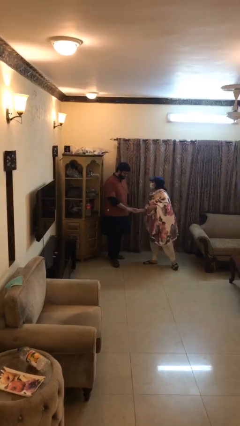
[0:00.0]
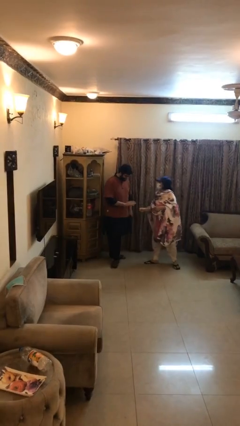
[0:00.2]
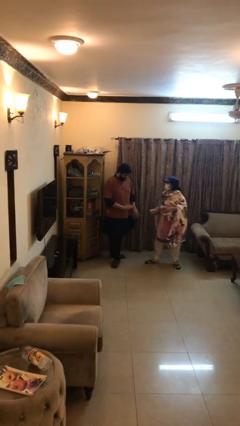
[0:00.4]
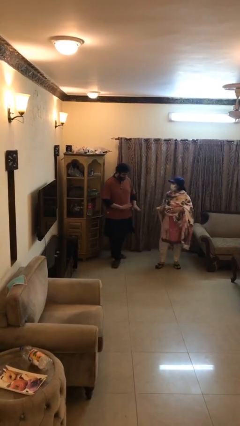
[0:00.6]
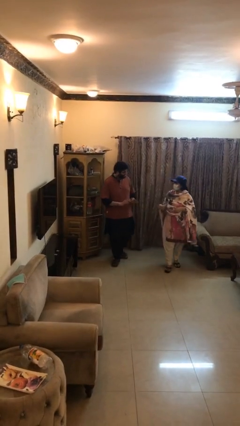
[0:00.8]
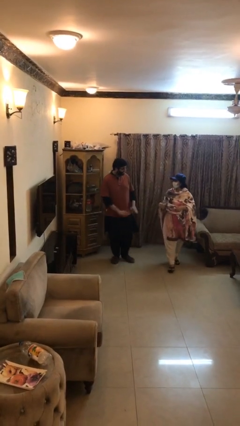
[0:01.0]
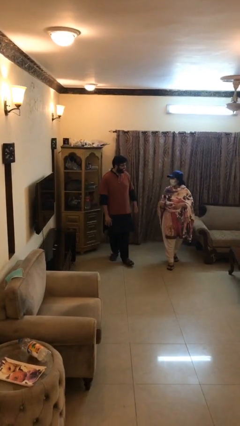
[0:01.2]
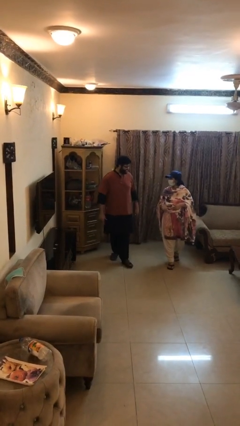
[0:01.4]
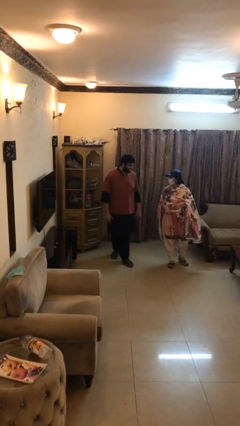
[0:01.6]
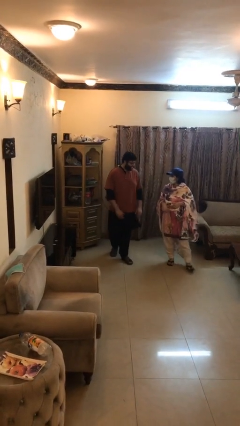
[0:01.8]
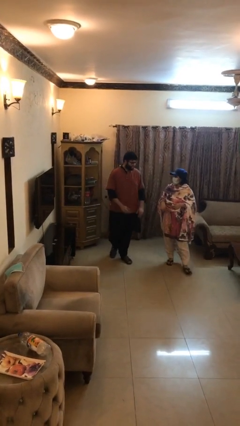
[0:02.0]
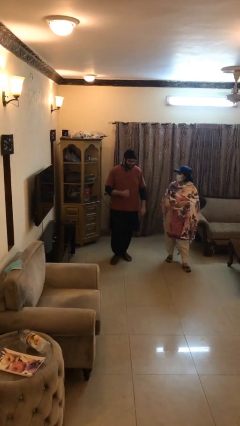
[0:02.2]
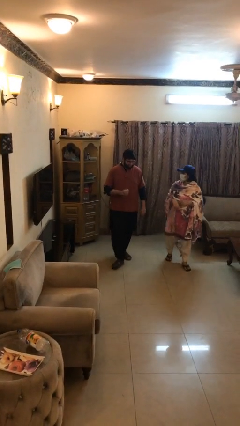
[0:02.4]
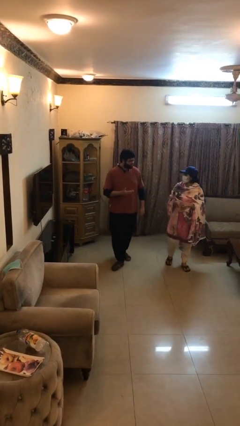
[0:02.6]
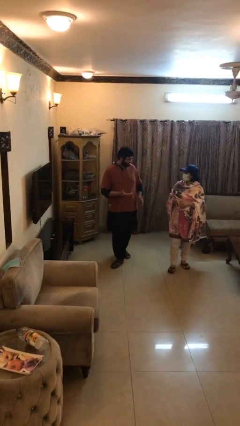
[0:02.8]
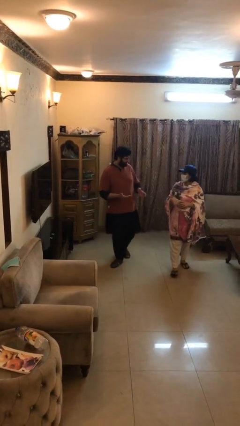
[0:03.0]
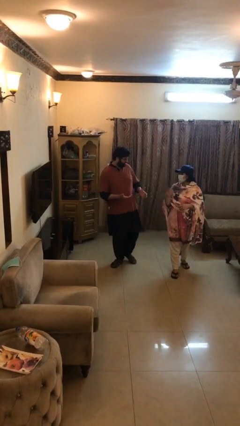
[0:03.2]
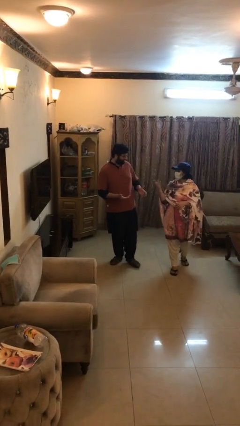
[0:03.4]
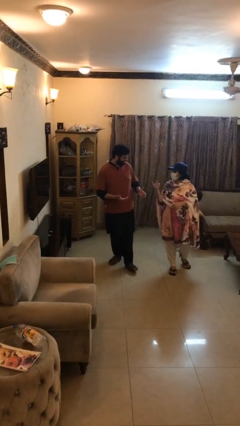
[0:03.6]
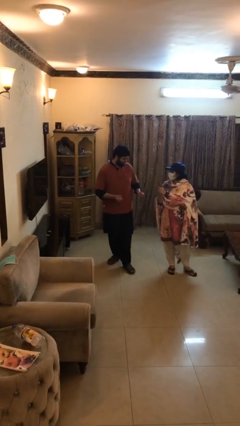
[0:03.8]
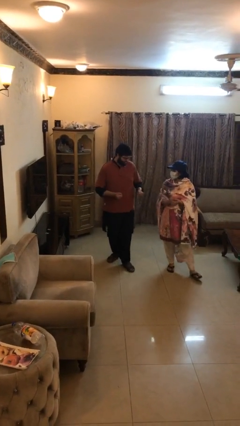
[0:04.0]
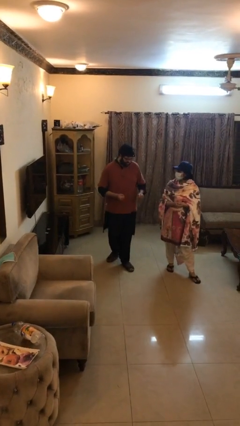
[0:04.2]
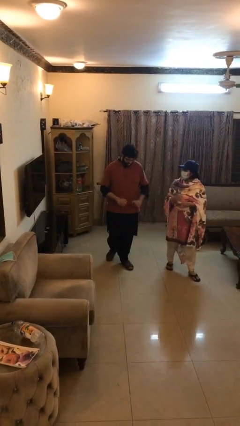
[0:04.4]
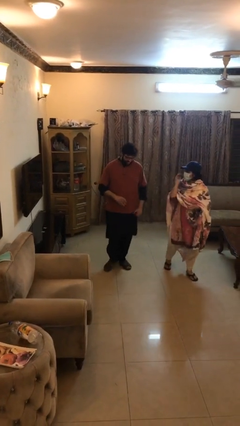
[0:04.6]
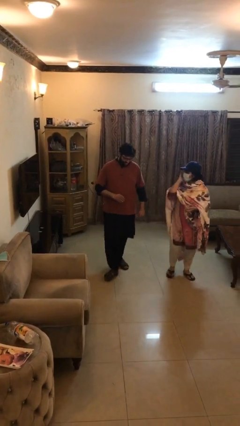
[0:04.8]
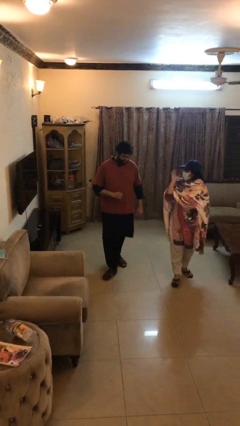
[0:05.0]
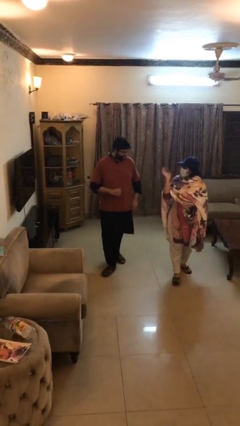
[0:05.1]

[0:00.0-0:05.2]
person talks to person

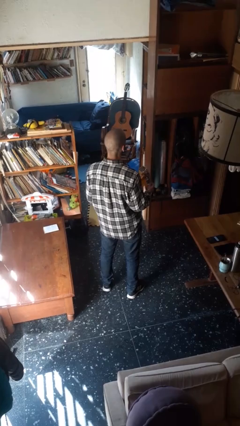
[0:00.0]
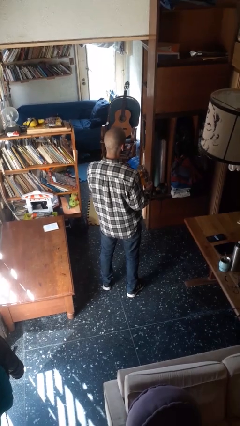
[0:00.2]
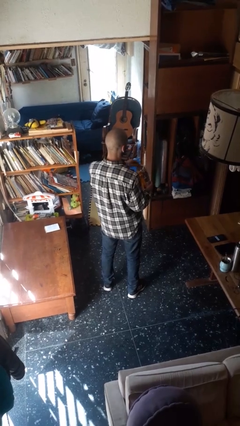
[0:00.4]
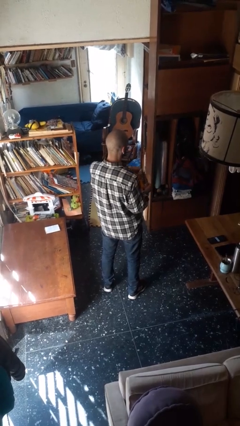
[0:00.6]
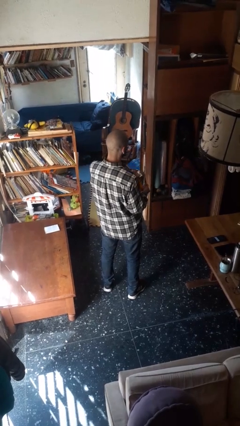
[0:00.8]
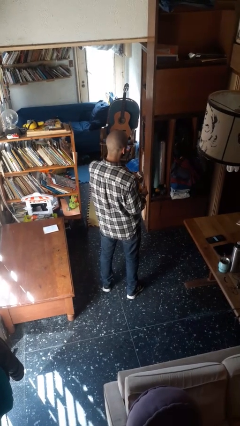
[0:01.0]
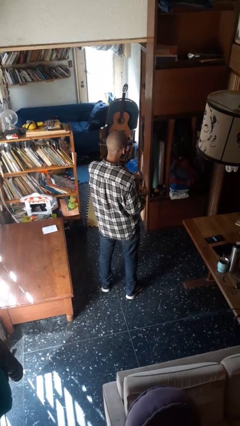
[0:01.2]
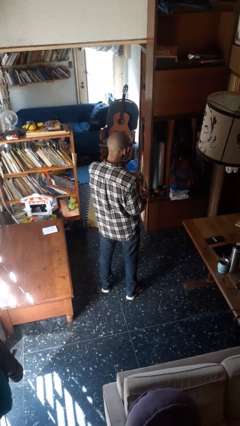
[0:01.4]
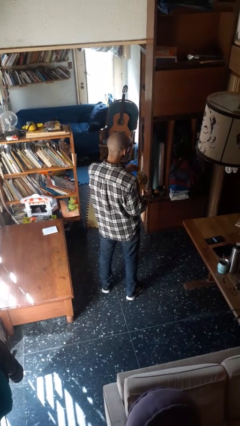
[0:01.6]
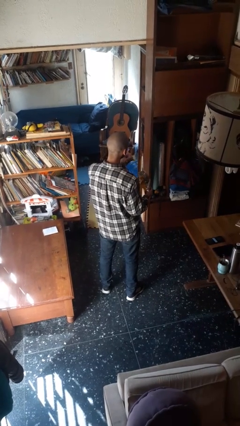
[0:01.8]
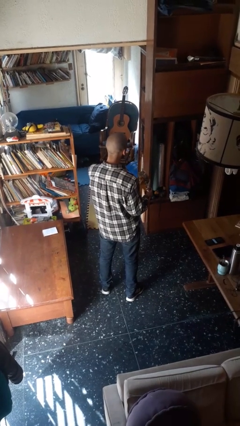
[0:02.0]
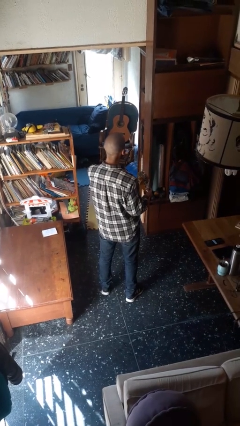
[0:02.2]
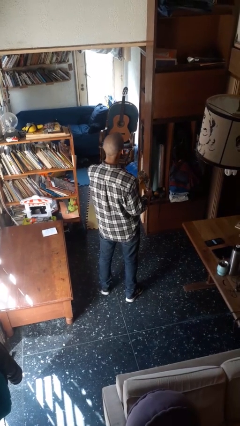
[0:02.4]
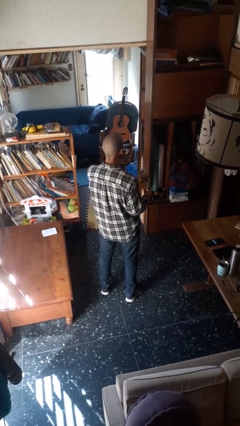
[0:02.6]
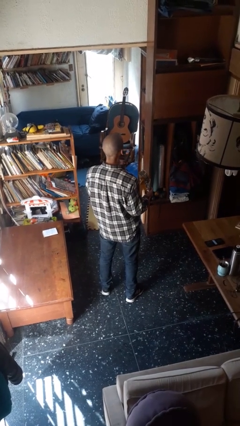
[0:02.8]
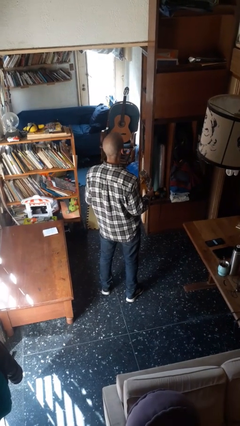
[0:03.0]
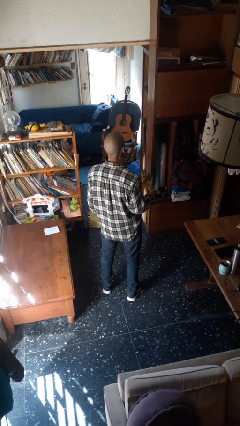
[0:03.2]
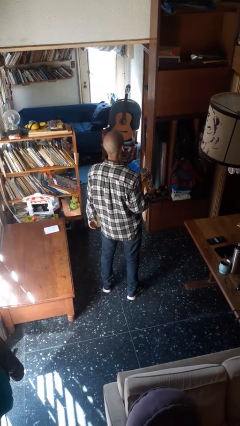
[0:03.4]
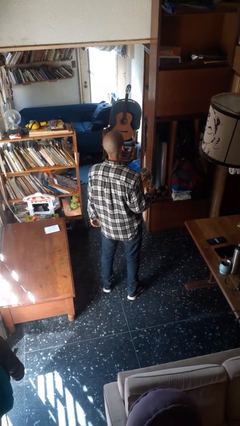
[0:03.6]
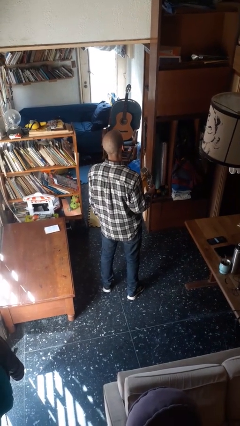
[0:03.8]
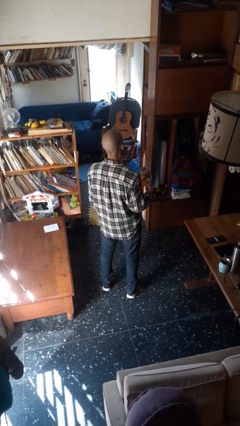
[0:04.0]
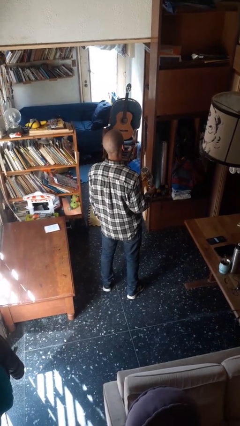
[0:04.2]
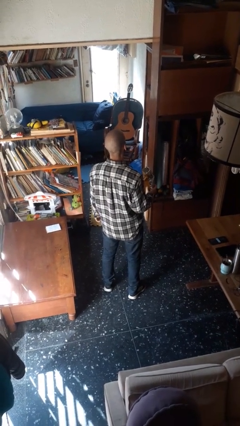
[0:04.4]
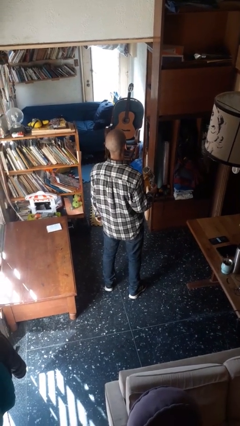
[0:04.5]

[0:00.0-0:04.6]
person eats snack from bag

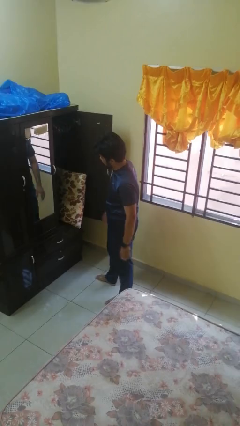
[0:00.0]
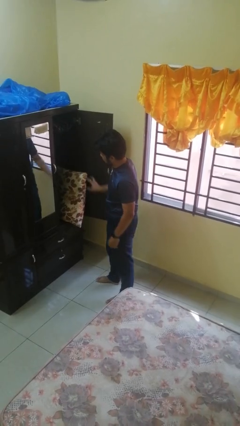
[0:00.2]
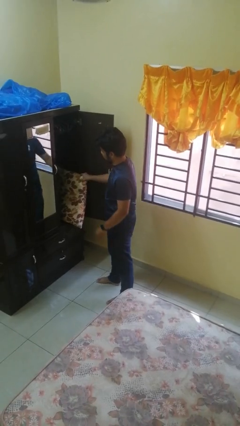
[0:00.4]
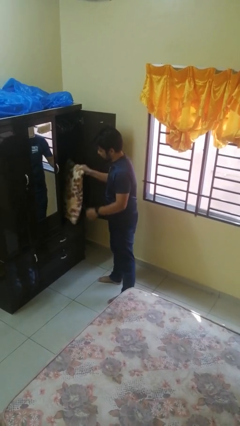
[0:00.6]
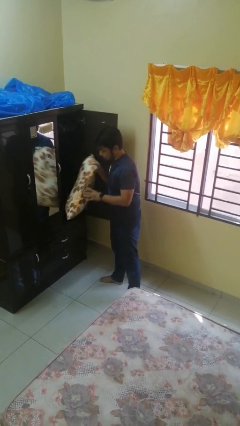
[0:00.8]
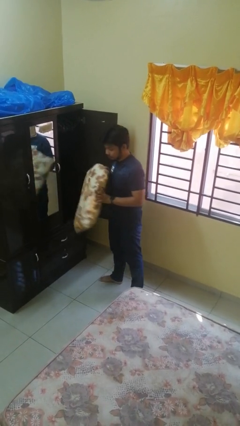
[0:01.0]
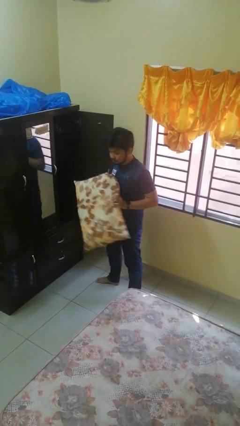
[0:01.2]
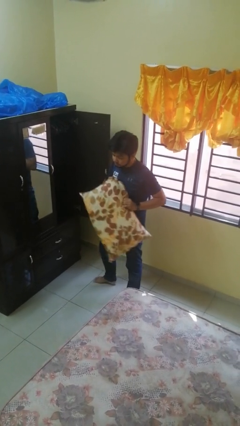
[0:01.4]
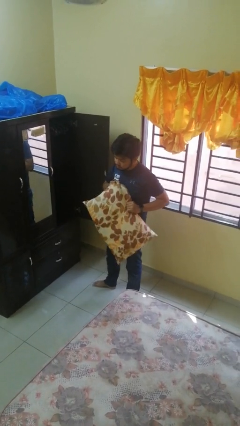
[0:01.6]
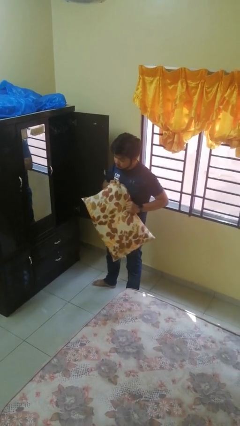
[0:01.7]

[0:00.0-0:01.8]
person picks up object from cabinet

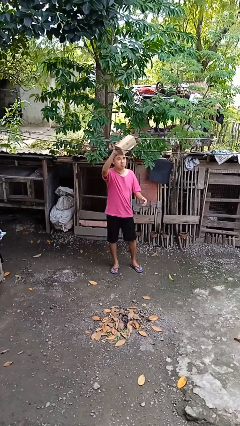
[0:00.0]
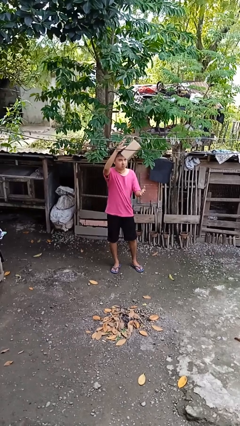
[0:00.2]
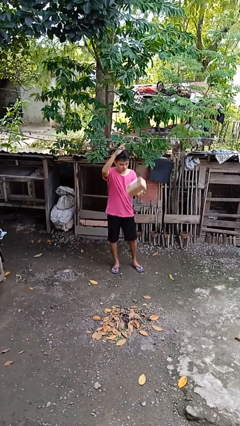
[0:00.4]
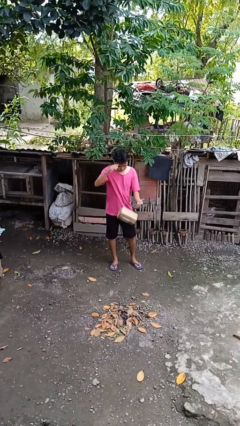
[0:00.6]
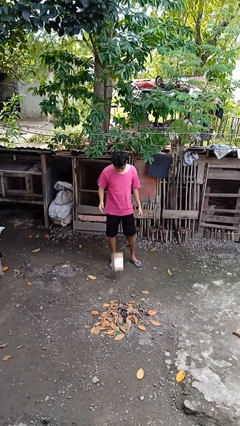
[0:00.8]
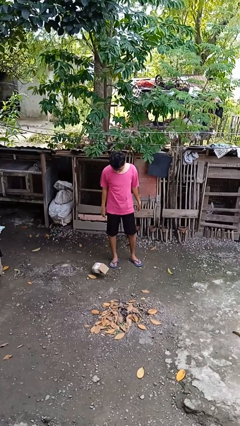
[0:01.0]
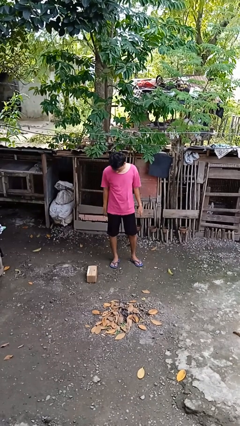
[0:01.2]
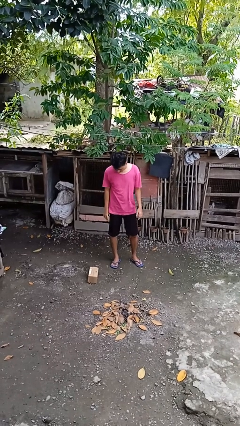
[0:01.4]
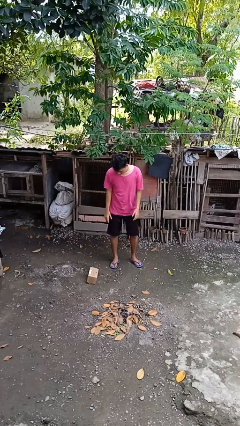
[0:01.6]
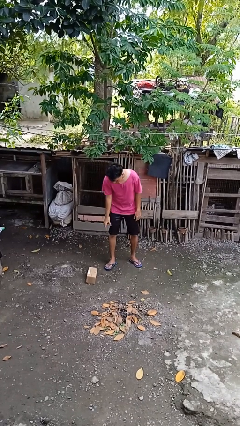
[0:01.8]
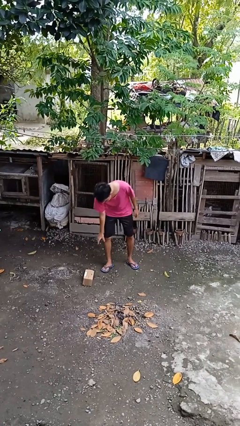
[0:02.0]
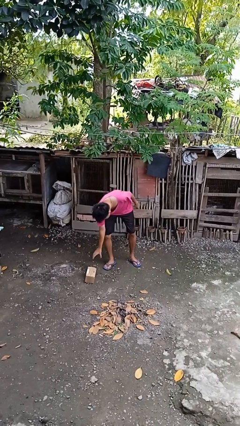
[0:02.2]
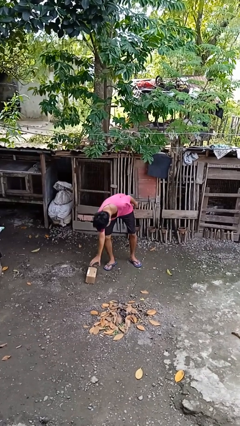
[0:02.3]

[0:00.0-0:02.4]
person drops object

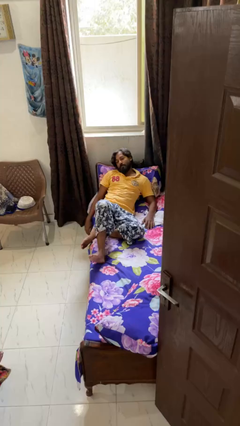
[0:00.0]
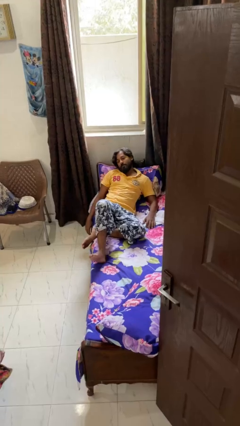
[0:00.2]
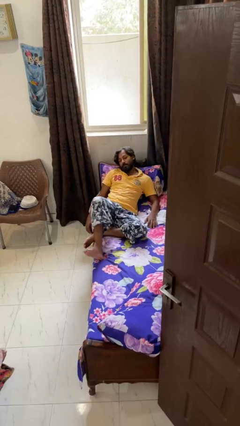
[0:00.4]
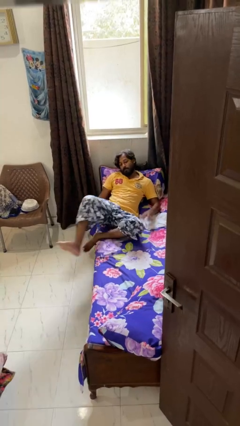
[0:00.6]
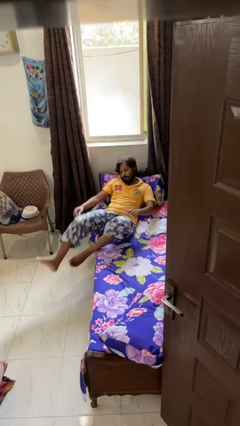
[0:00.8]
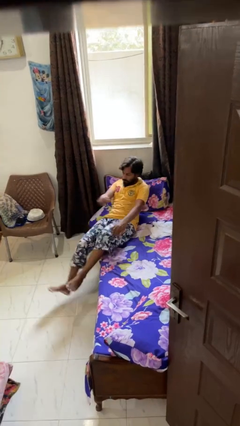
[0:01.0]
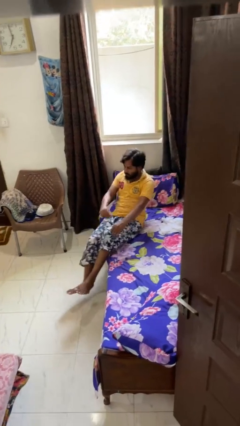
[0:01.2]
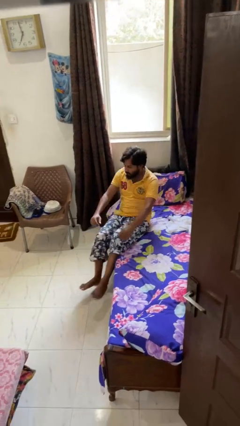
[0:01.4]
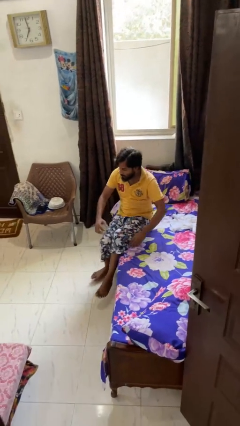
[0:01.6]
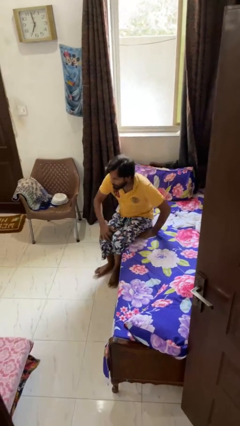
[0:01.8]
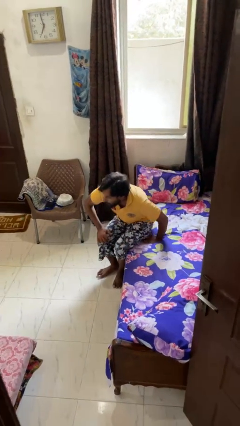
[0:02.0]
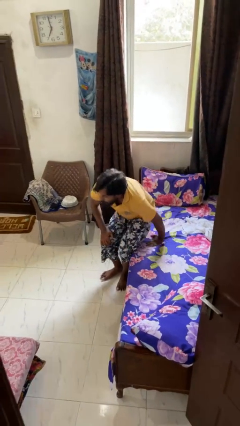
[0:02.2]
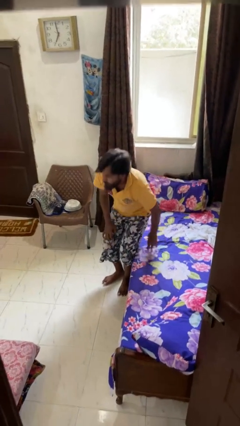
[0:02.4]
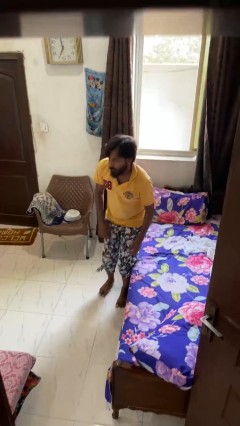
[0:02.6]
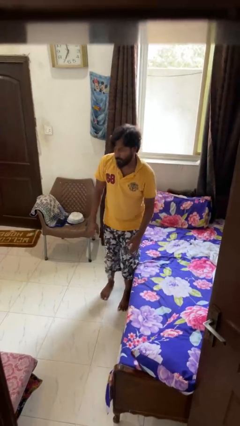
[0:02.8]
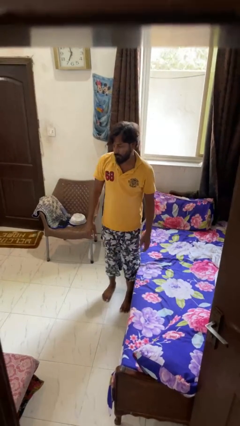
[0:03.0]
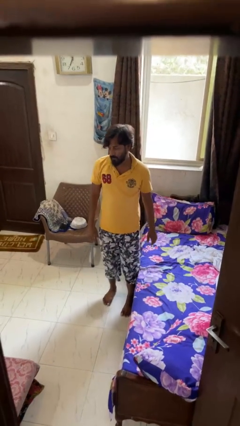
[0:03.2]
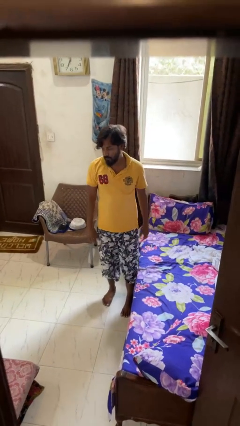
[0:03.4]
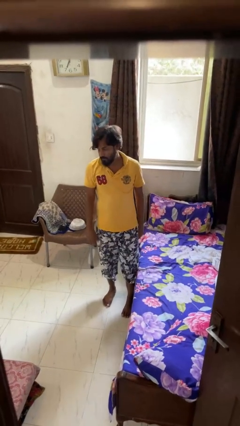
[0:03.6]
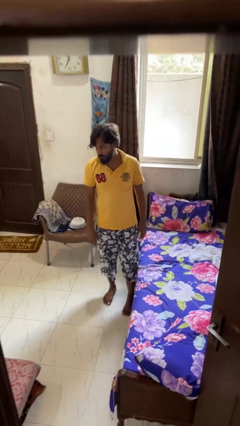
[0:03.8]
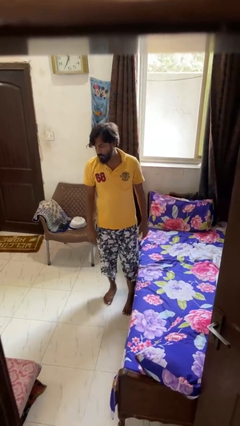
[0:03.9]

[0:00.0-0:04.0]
person stands up
